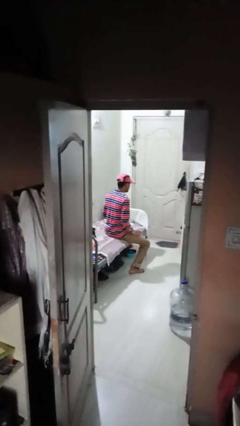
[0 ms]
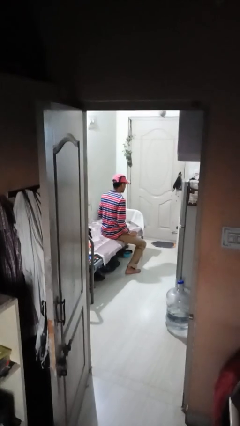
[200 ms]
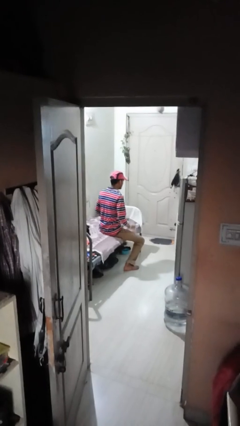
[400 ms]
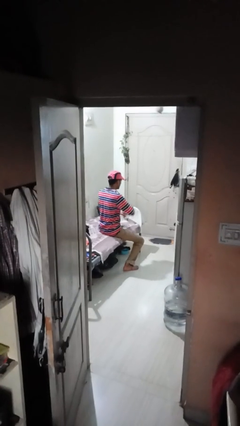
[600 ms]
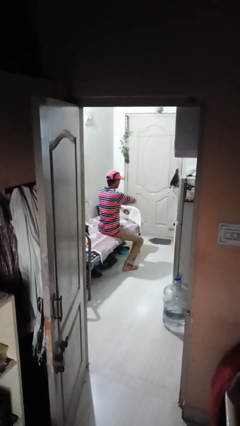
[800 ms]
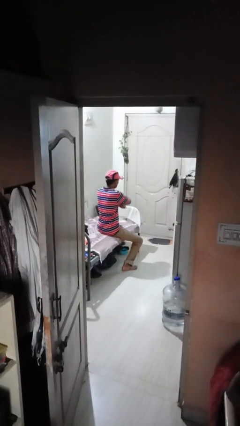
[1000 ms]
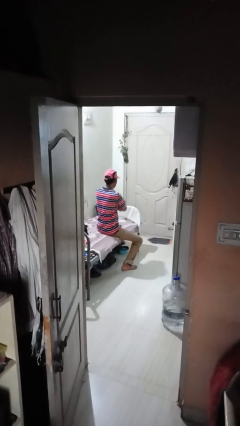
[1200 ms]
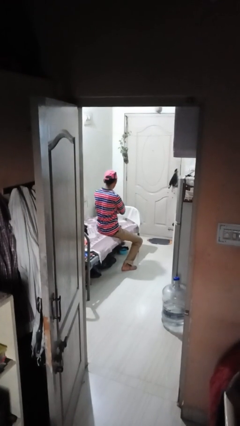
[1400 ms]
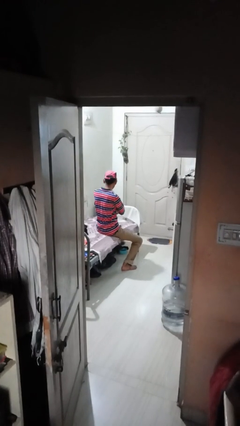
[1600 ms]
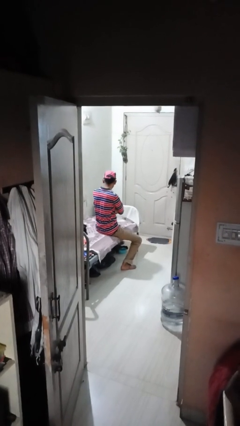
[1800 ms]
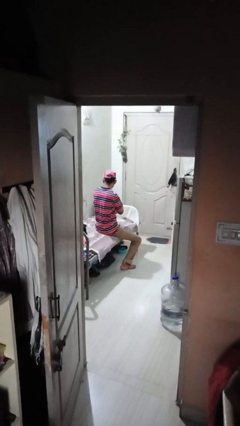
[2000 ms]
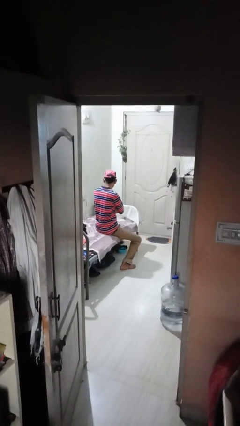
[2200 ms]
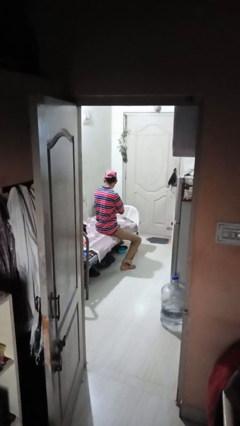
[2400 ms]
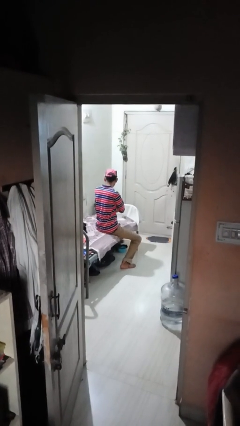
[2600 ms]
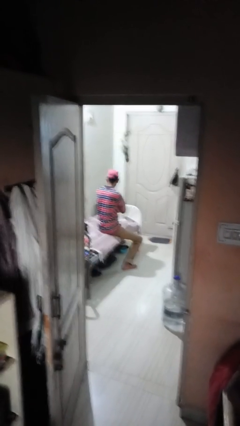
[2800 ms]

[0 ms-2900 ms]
person crosses arms

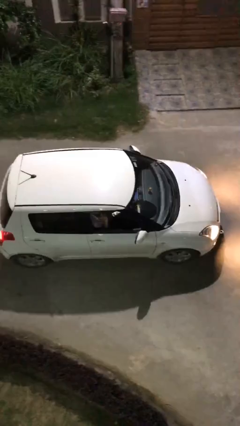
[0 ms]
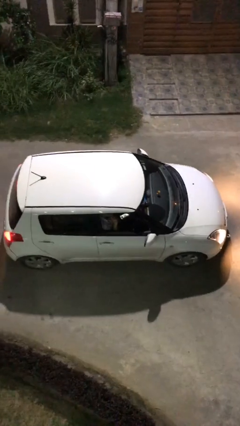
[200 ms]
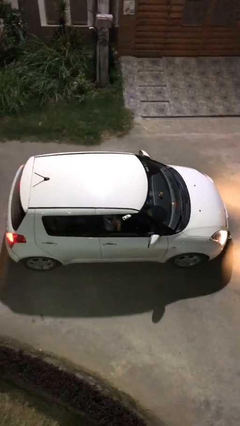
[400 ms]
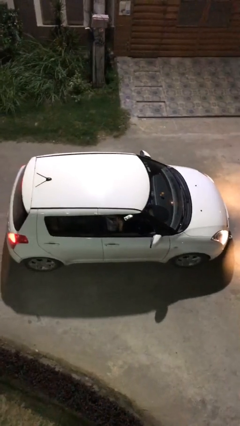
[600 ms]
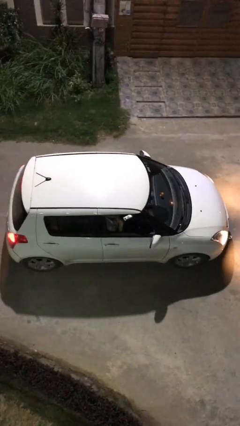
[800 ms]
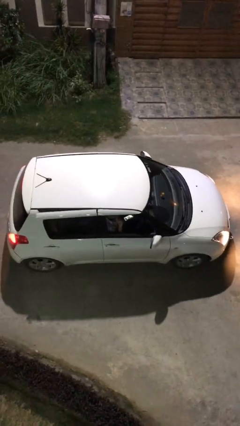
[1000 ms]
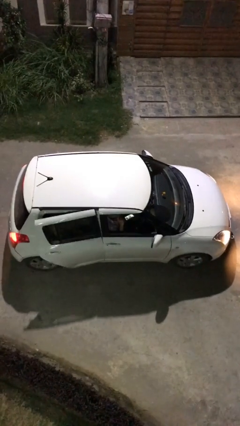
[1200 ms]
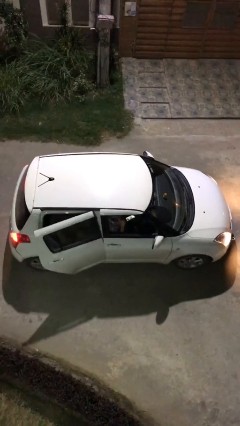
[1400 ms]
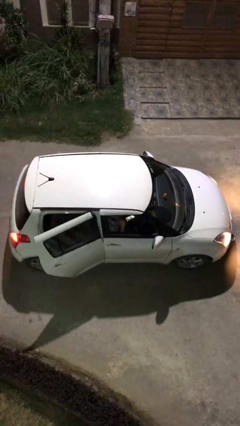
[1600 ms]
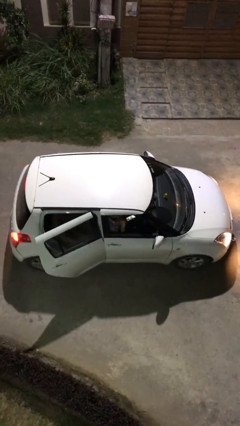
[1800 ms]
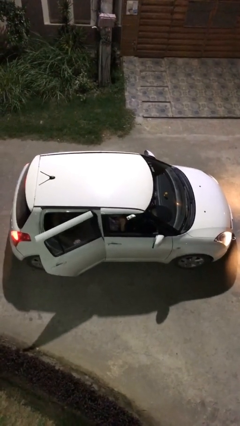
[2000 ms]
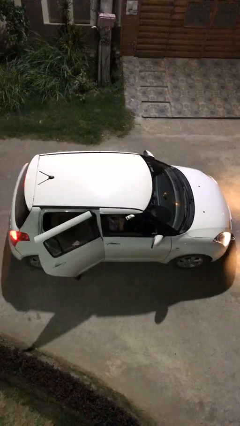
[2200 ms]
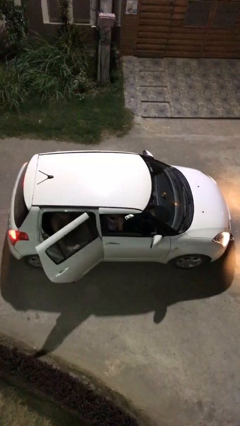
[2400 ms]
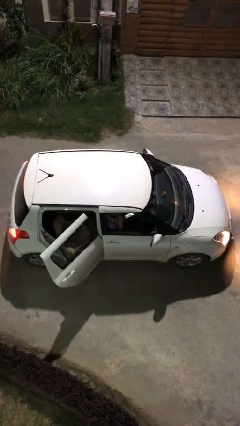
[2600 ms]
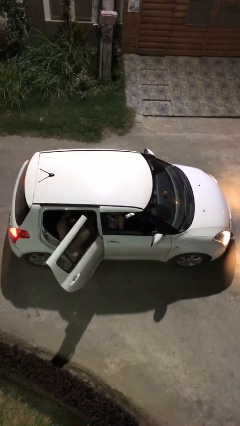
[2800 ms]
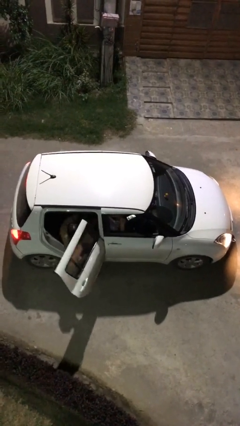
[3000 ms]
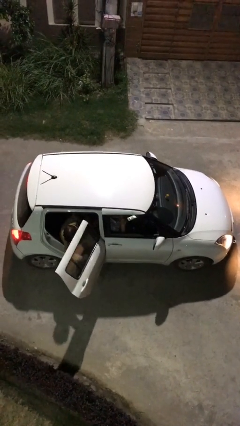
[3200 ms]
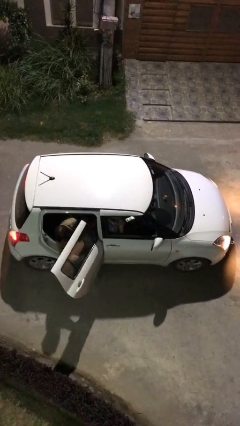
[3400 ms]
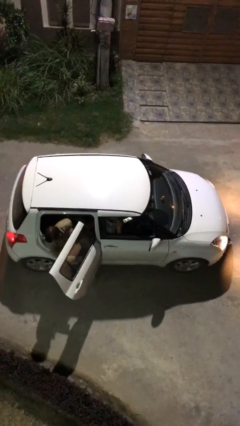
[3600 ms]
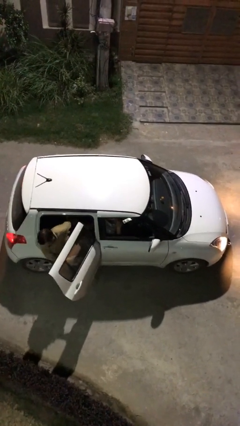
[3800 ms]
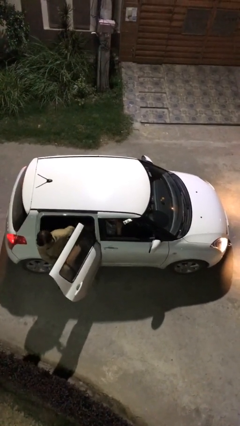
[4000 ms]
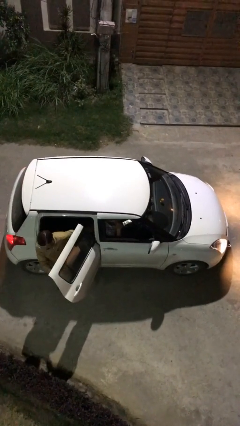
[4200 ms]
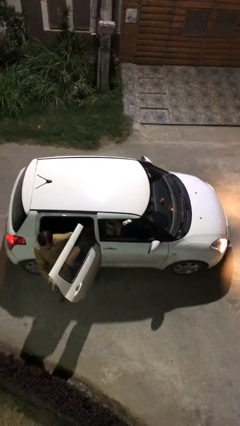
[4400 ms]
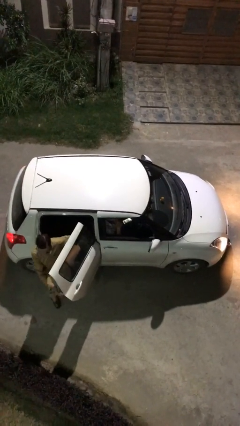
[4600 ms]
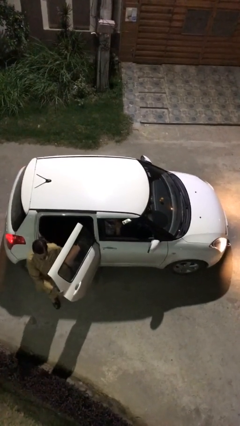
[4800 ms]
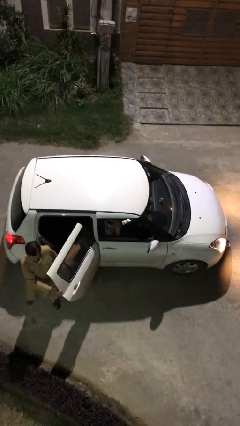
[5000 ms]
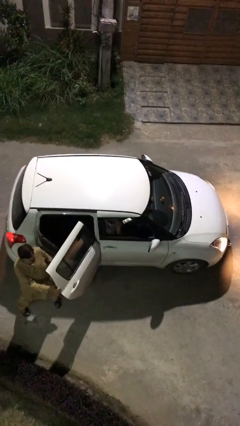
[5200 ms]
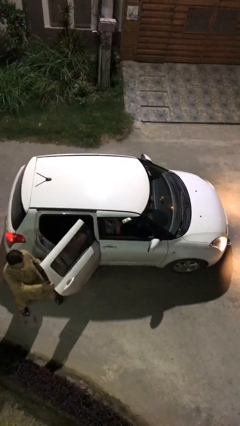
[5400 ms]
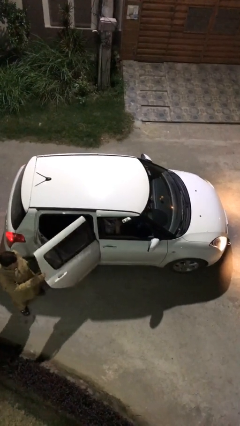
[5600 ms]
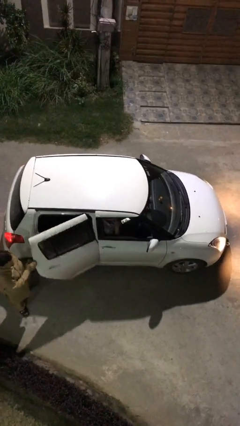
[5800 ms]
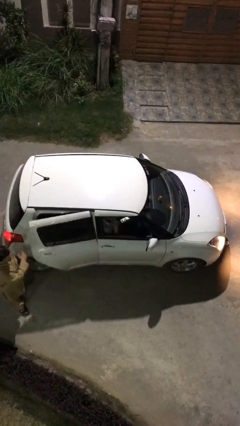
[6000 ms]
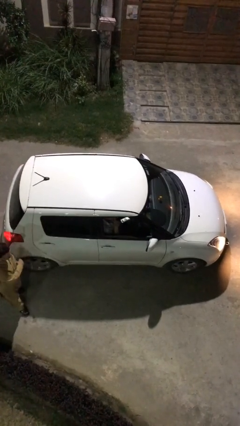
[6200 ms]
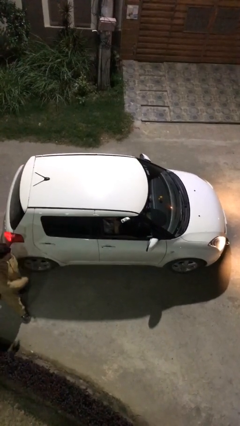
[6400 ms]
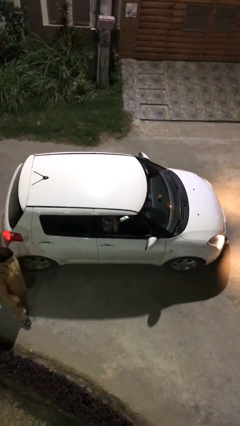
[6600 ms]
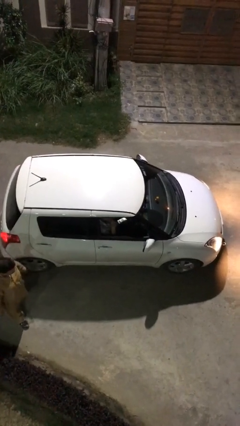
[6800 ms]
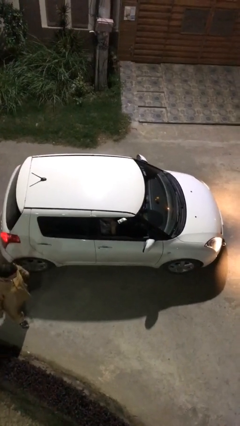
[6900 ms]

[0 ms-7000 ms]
car drops off person

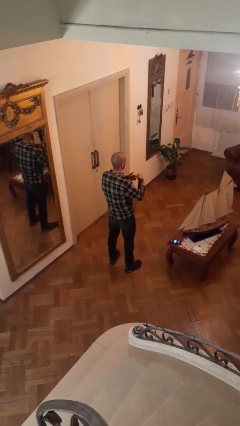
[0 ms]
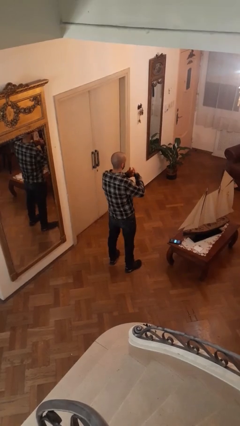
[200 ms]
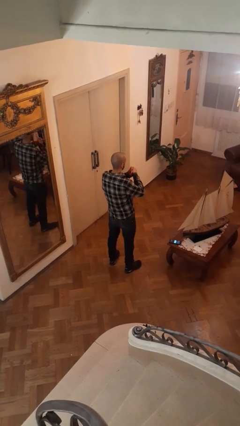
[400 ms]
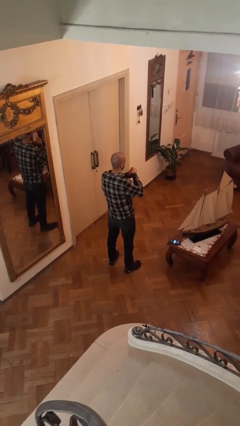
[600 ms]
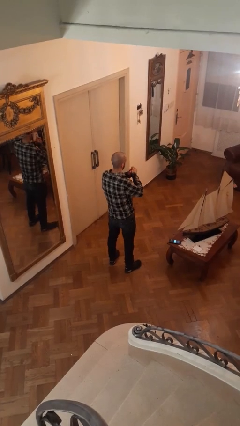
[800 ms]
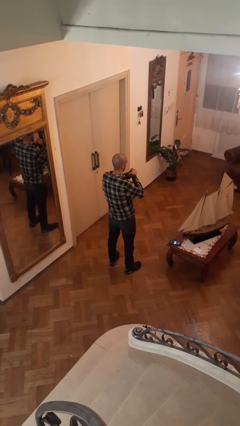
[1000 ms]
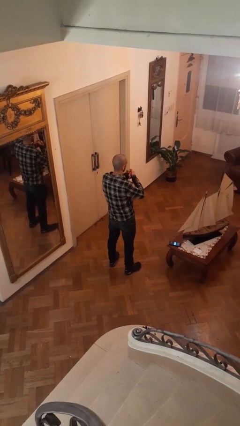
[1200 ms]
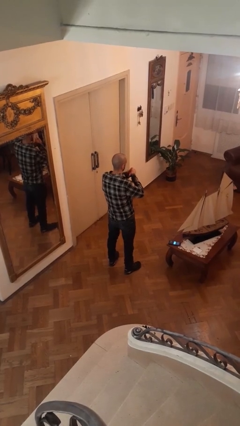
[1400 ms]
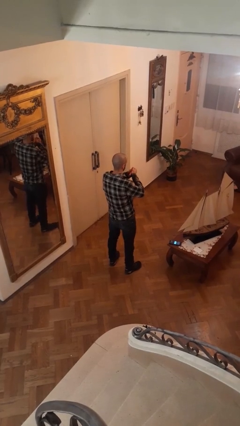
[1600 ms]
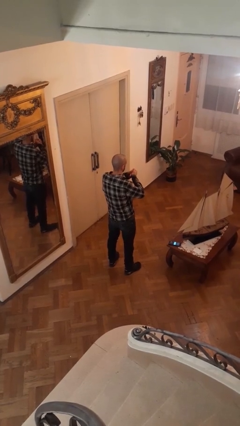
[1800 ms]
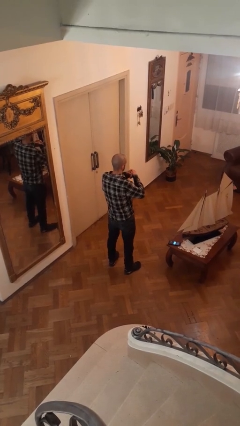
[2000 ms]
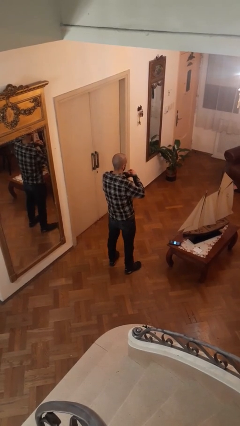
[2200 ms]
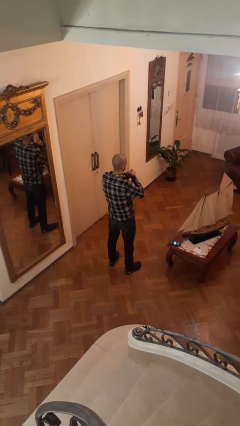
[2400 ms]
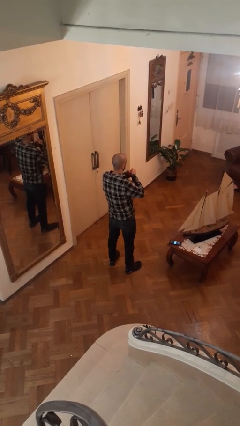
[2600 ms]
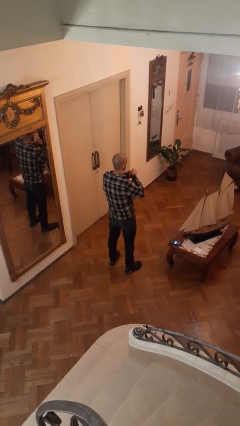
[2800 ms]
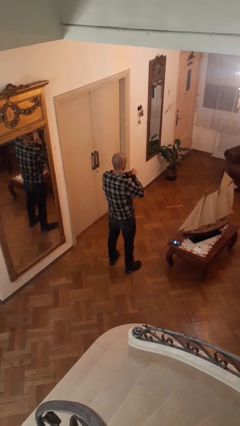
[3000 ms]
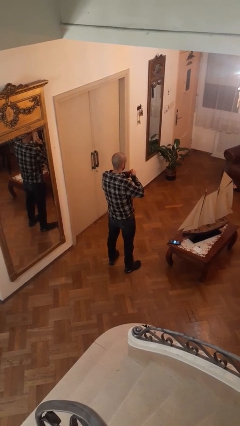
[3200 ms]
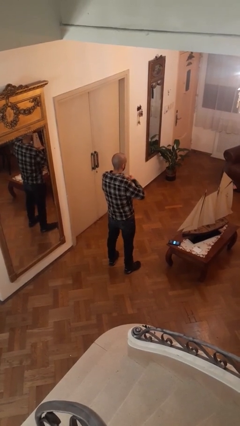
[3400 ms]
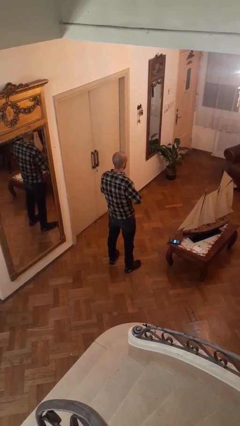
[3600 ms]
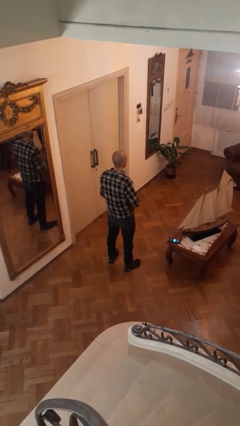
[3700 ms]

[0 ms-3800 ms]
person cracks knuckles

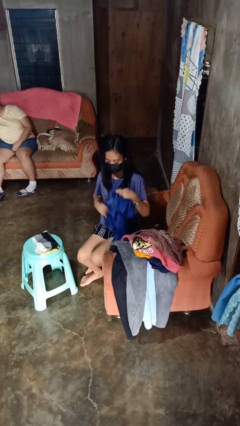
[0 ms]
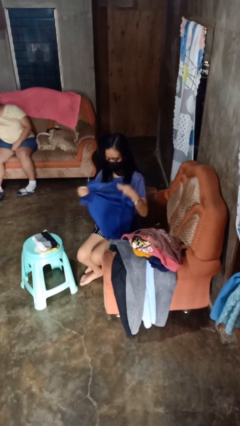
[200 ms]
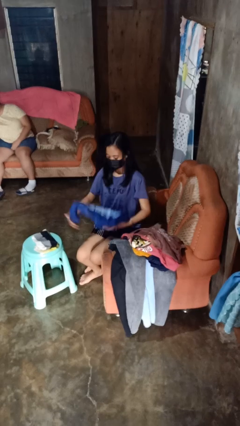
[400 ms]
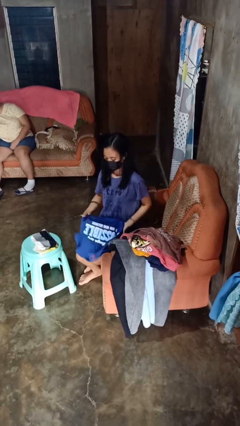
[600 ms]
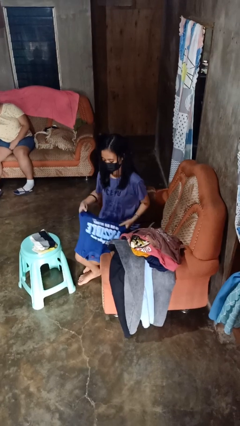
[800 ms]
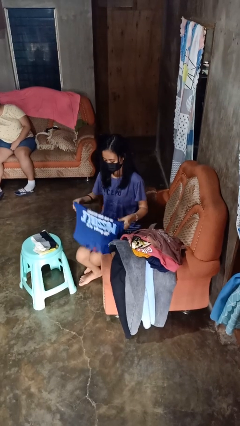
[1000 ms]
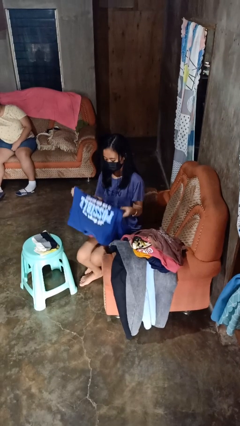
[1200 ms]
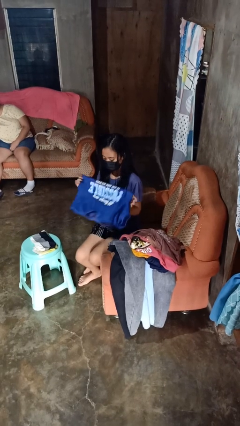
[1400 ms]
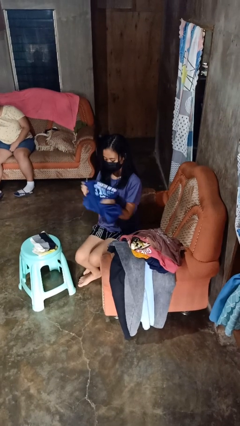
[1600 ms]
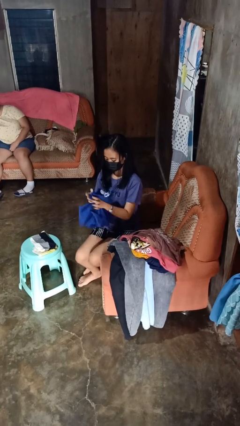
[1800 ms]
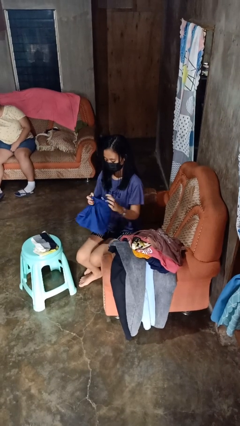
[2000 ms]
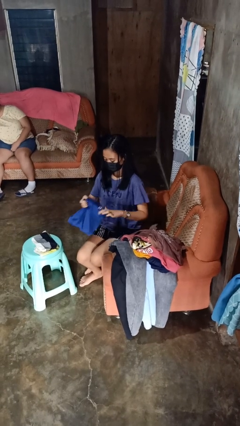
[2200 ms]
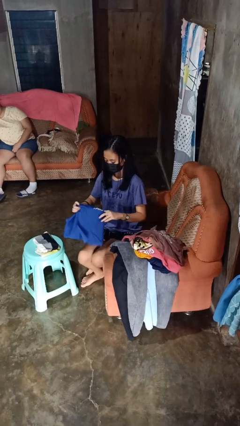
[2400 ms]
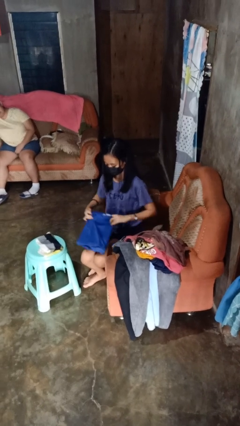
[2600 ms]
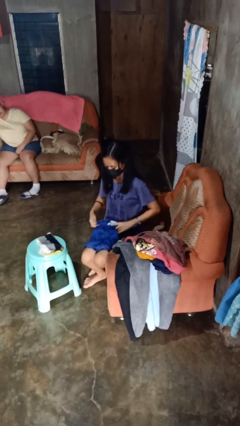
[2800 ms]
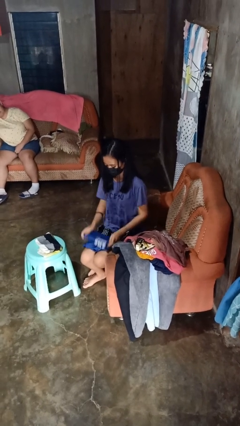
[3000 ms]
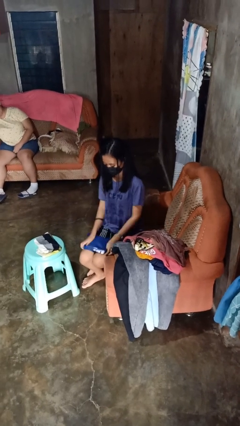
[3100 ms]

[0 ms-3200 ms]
person folds shirt

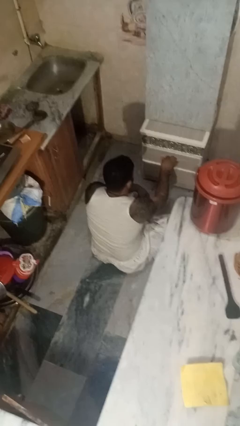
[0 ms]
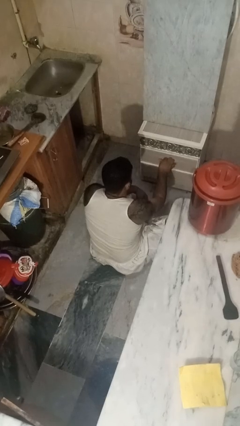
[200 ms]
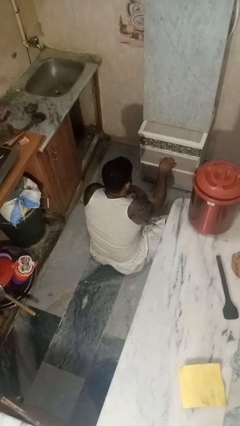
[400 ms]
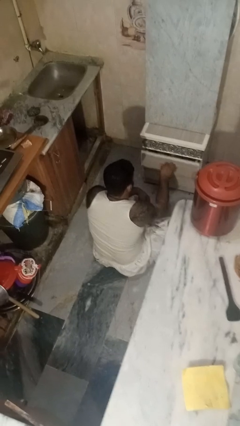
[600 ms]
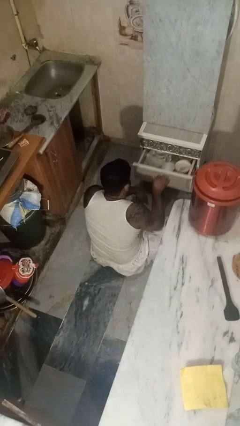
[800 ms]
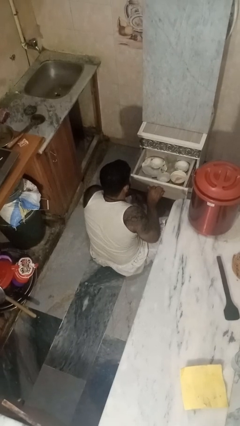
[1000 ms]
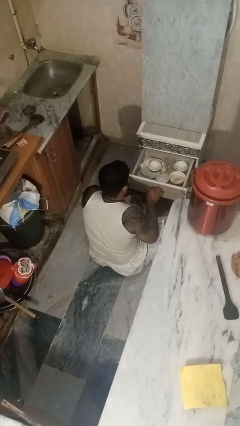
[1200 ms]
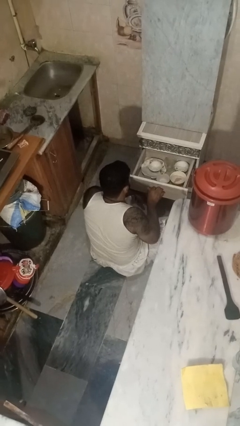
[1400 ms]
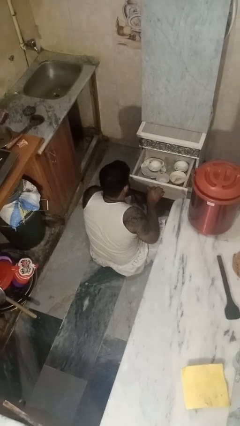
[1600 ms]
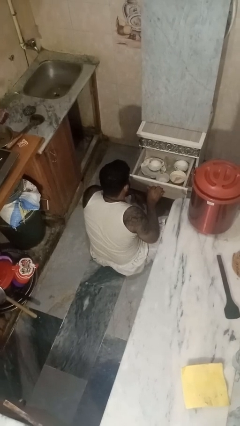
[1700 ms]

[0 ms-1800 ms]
person opens kitchen drawer
